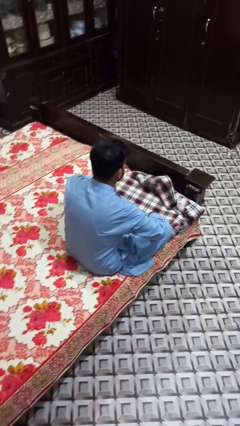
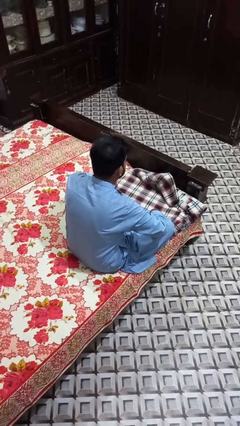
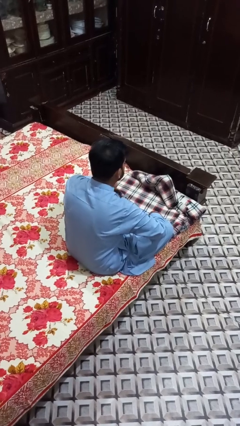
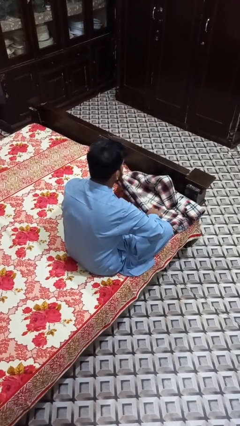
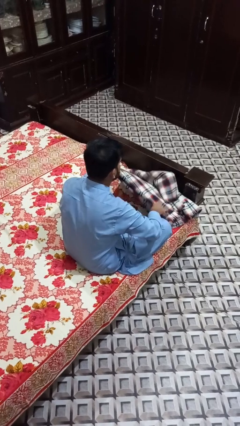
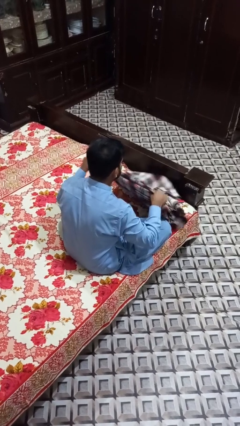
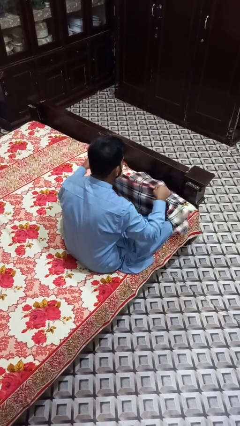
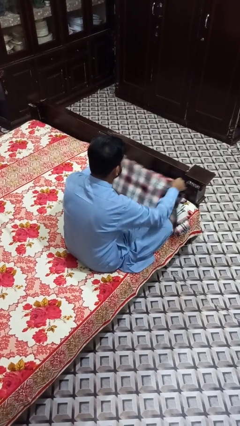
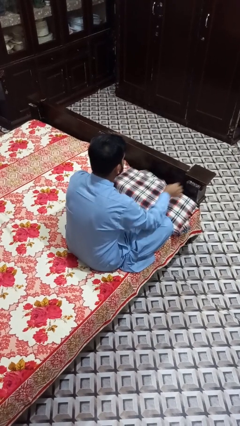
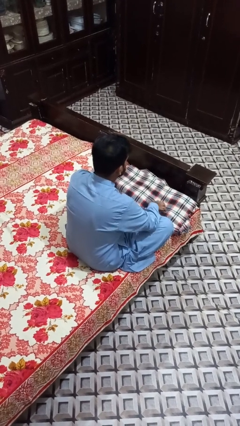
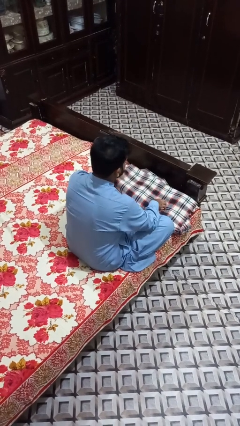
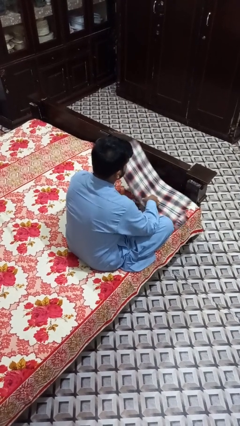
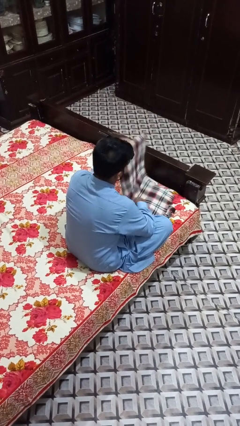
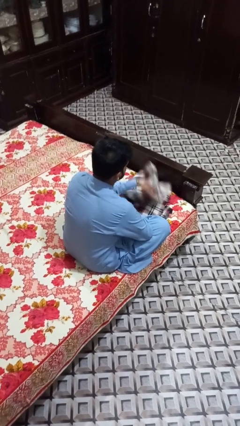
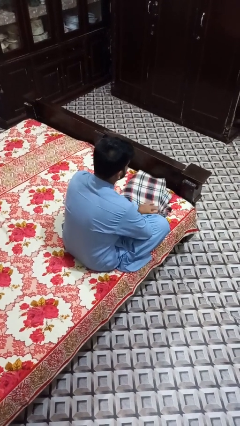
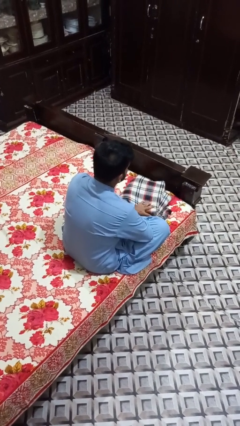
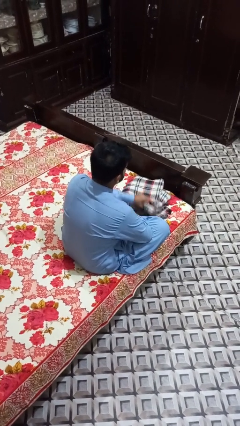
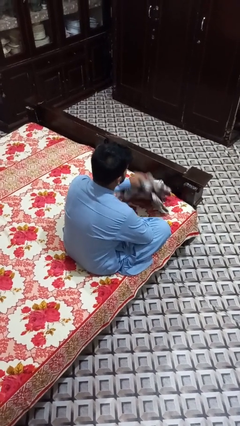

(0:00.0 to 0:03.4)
person folds blanket

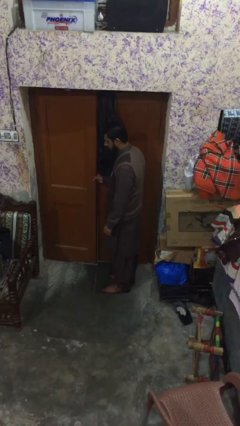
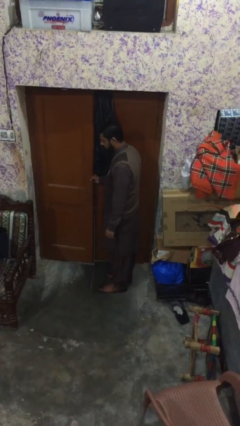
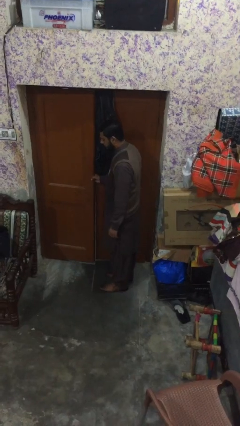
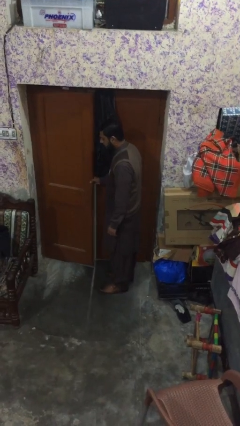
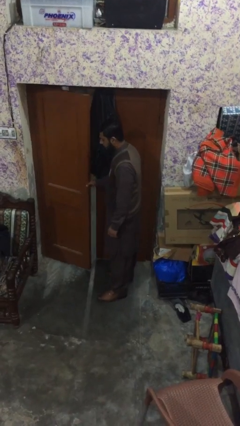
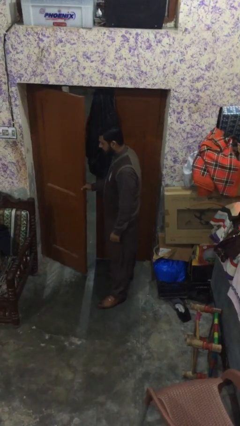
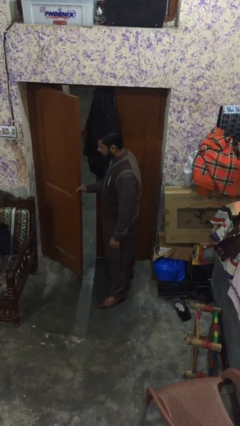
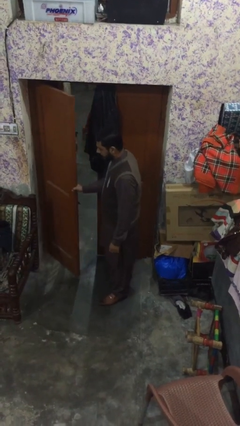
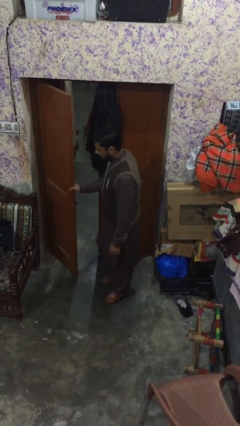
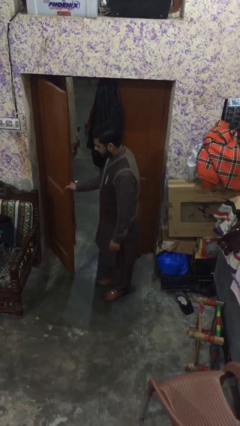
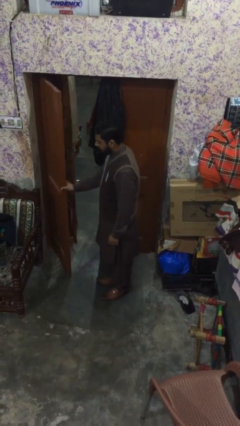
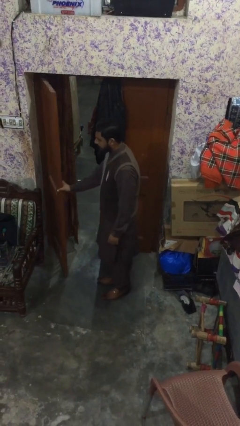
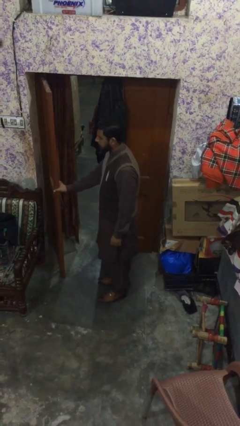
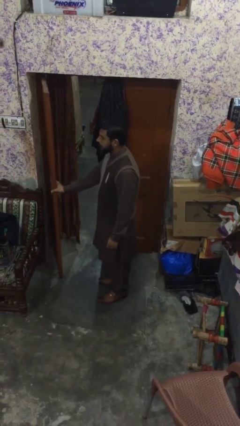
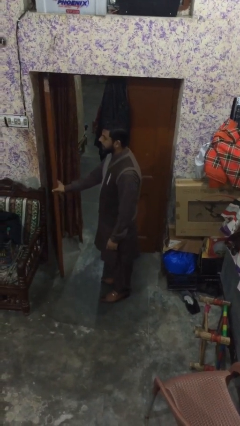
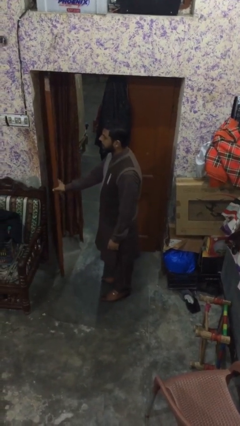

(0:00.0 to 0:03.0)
person opens facility door

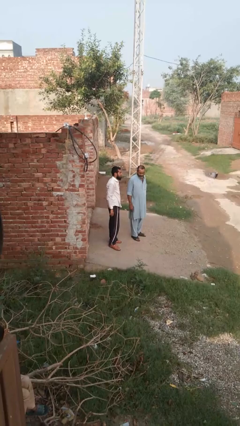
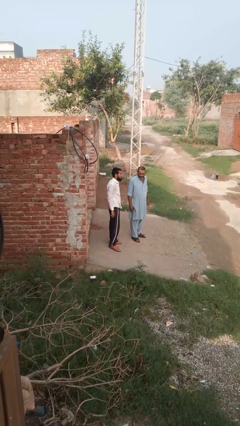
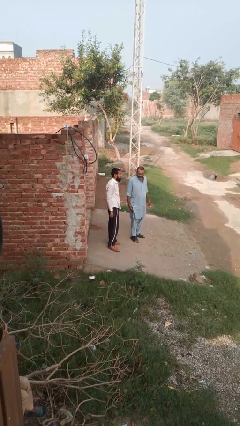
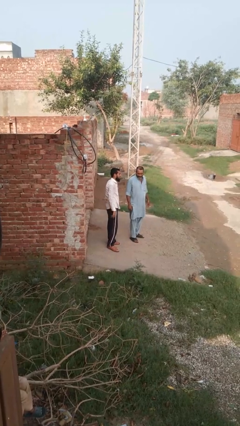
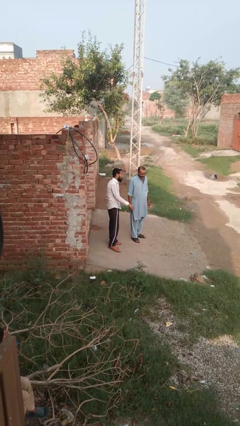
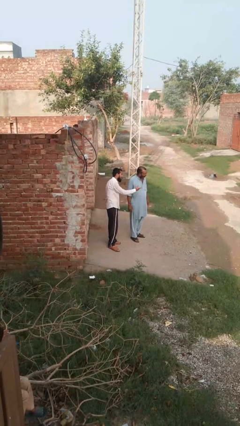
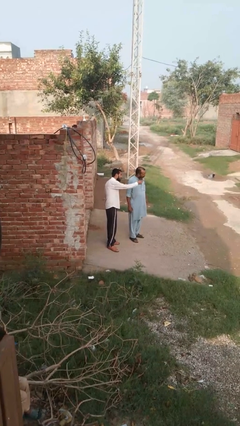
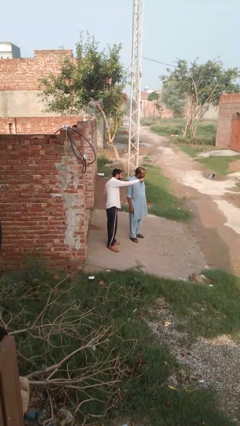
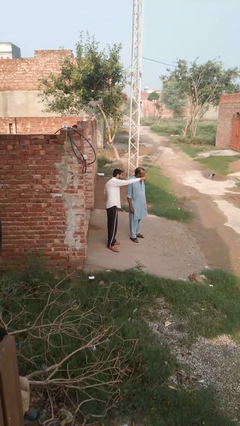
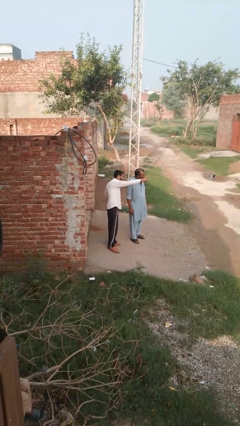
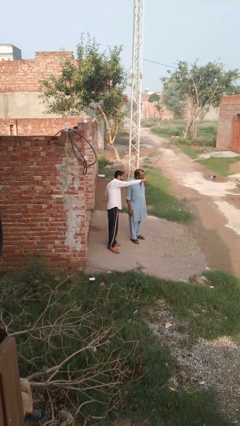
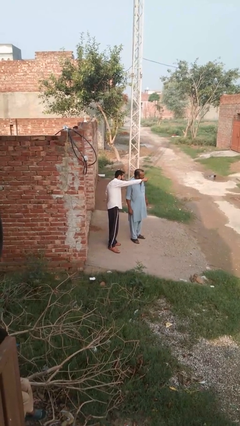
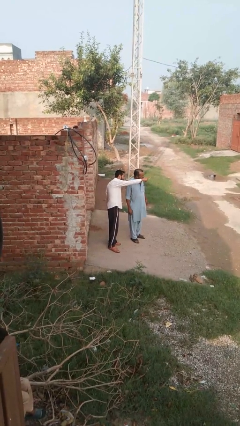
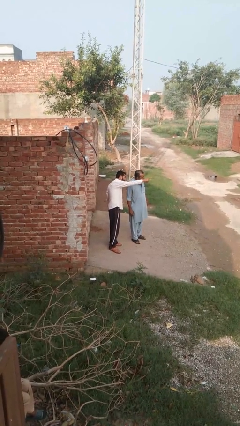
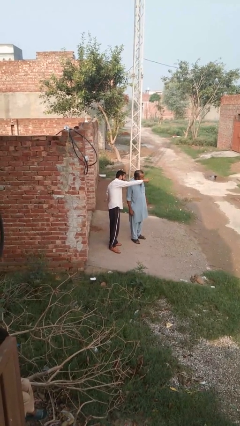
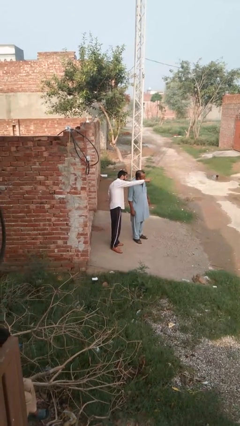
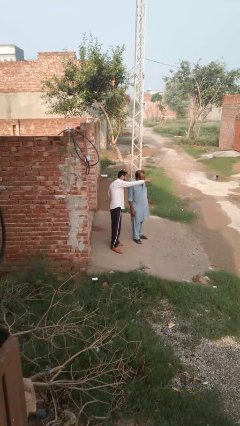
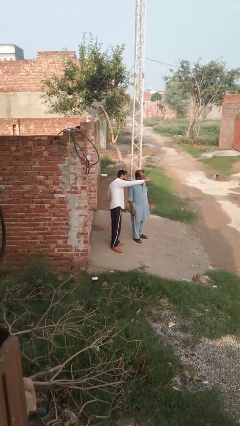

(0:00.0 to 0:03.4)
person points at person

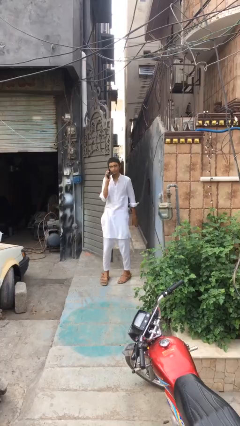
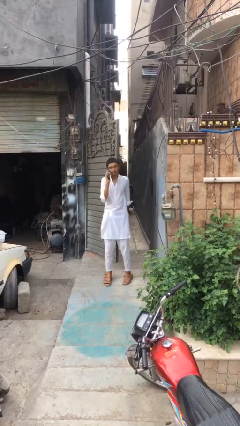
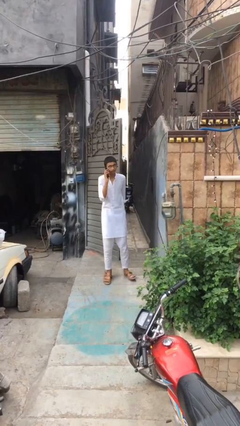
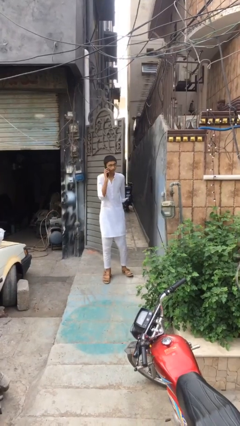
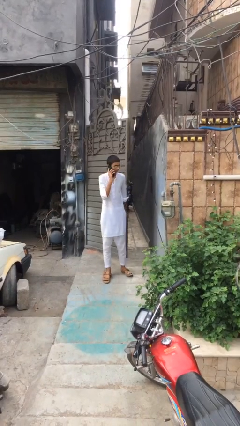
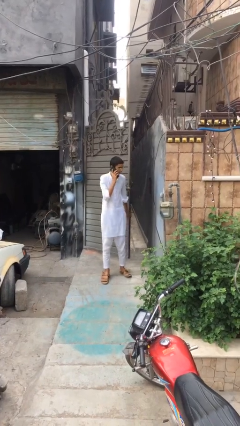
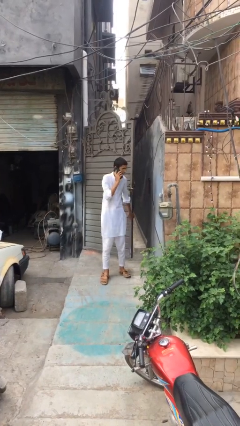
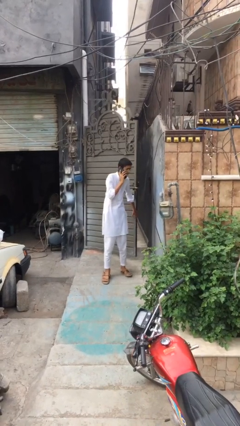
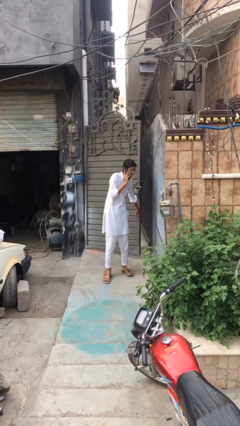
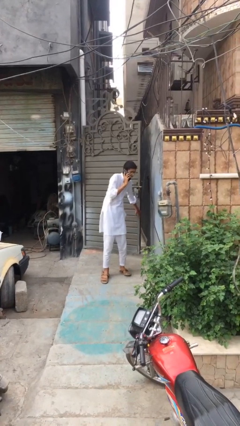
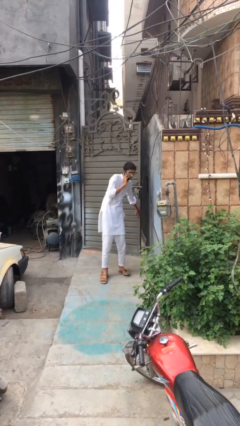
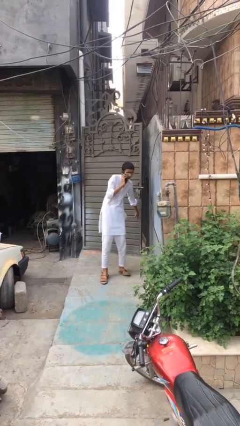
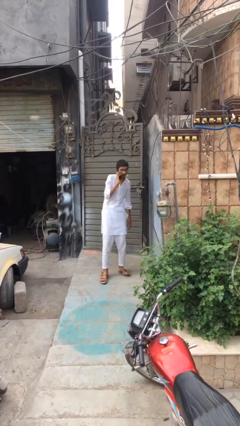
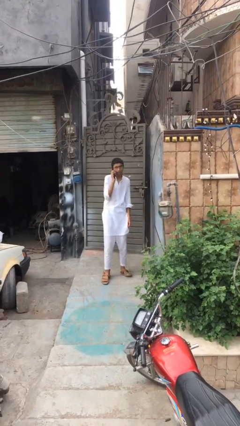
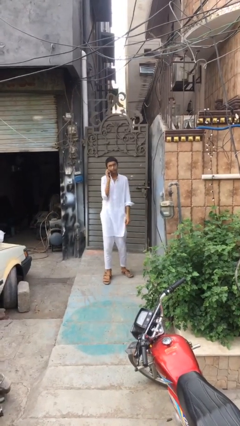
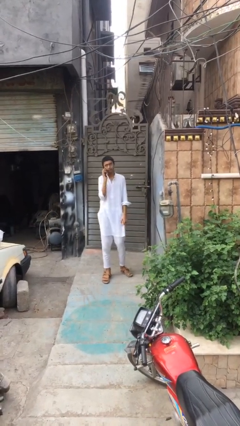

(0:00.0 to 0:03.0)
person closes facility door

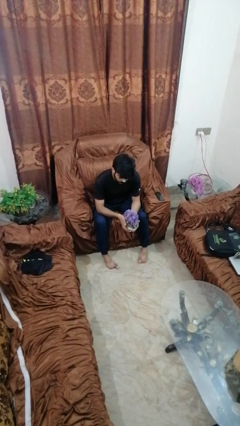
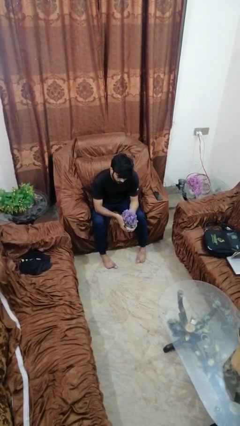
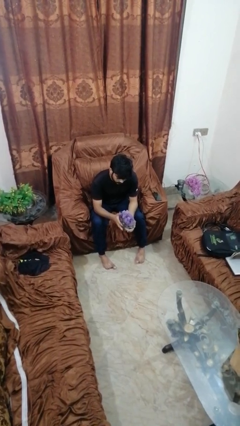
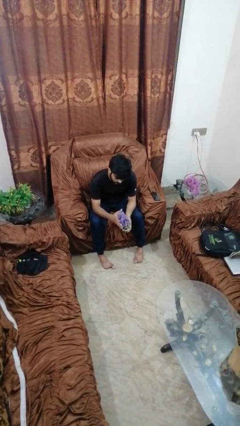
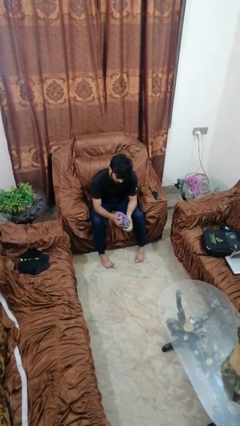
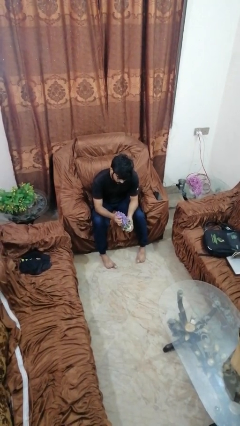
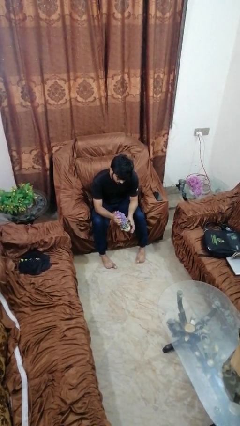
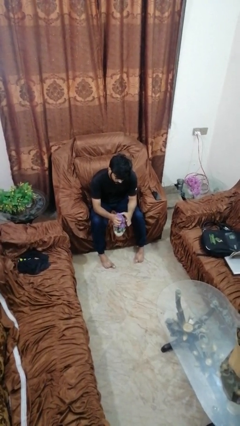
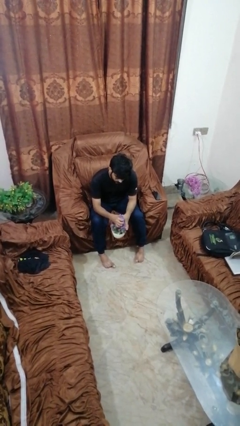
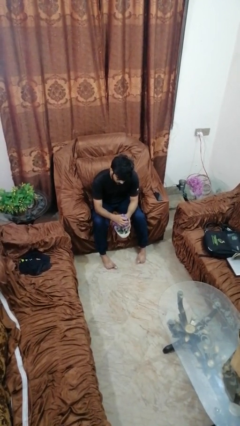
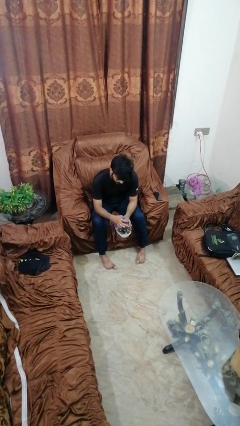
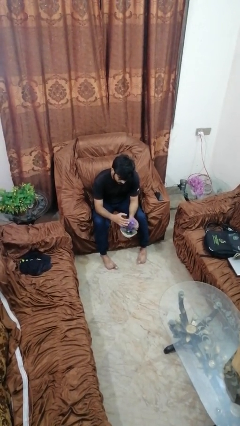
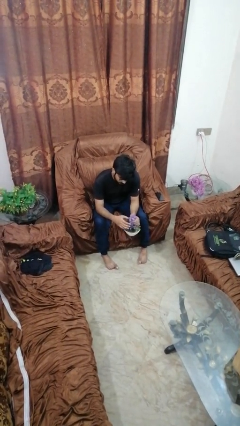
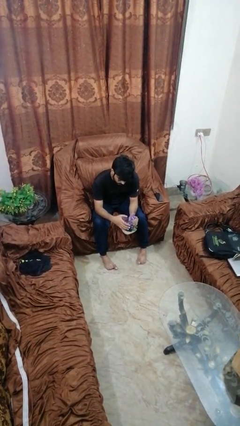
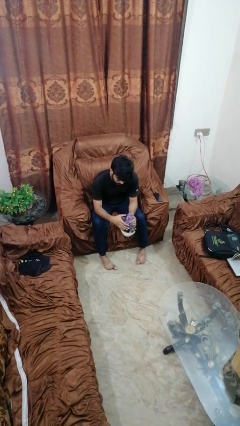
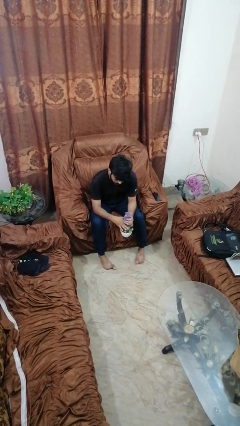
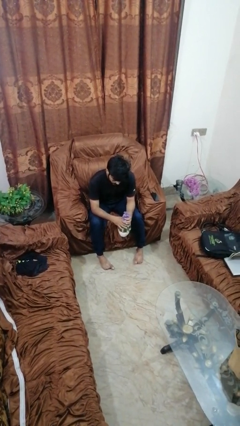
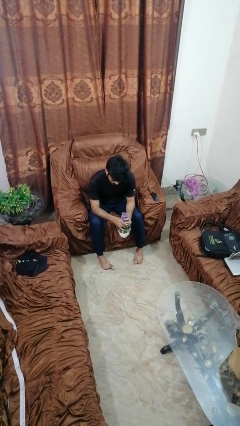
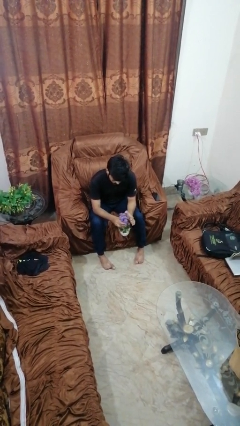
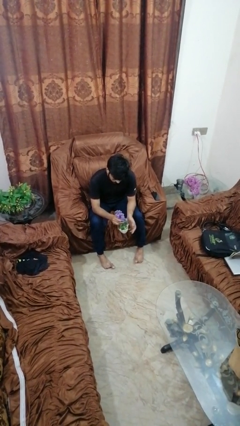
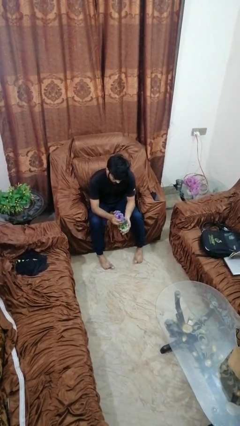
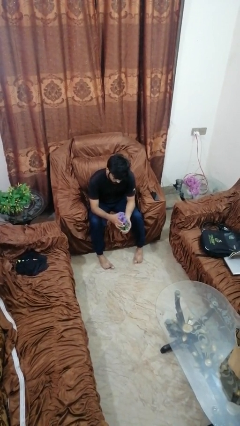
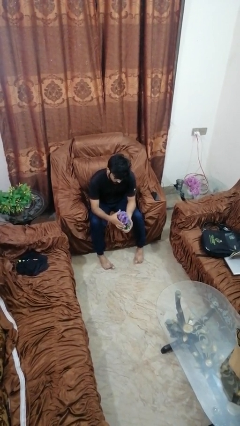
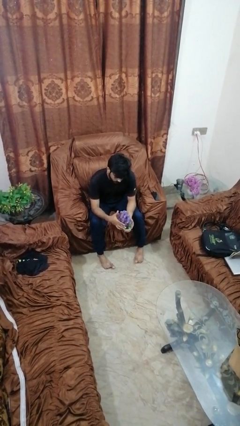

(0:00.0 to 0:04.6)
person squeezes object

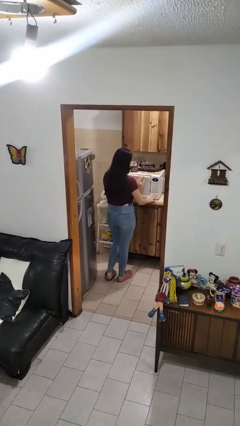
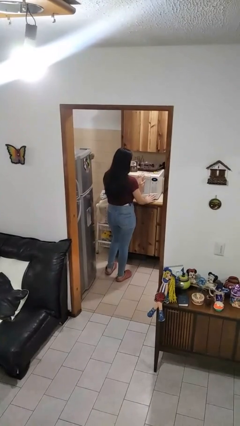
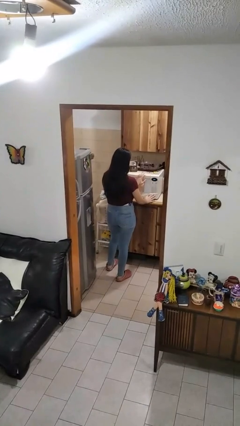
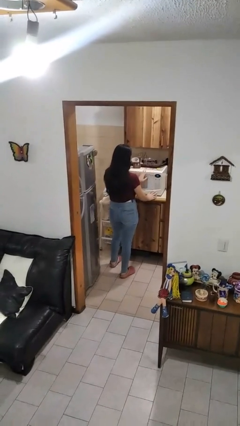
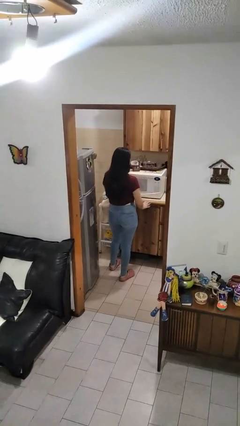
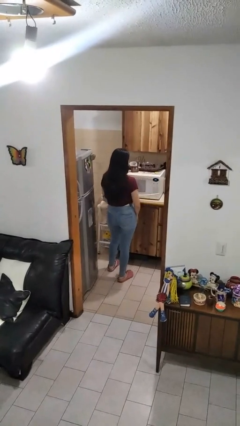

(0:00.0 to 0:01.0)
person closes microwave
